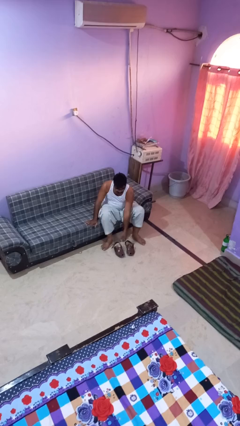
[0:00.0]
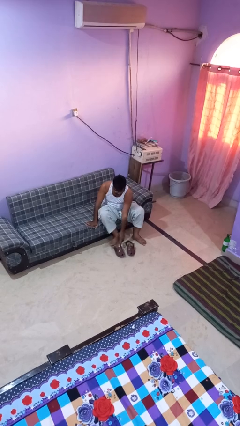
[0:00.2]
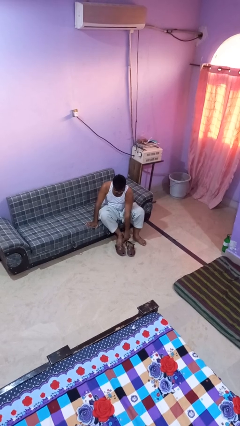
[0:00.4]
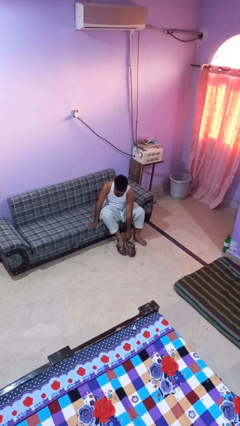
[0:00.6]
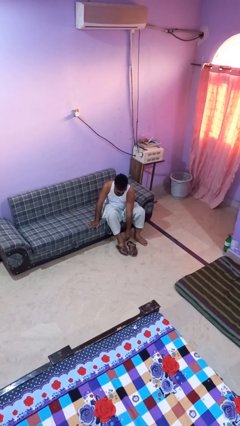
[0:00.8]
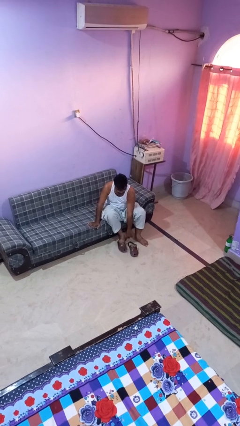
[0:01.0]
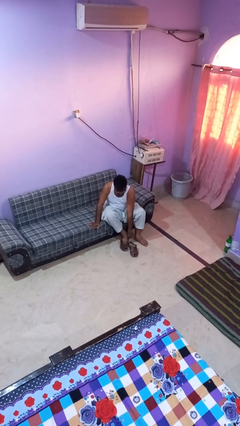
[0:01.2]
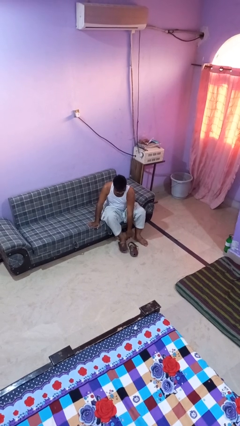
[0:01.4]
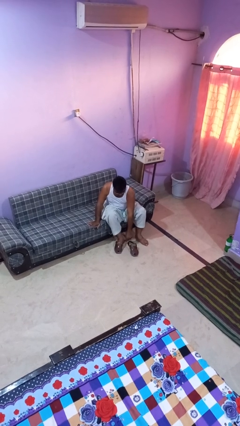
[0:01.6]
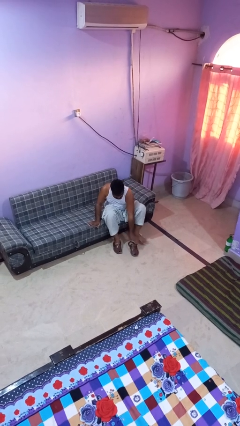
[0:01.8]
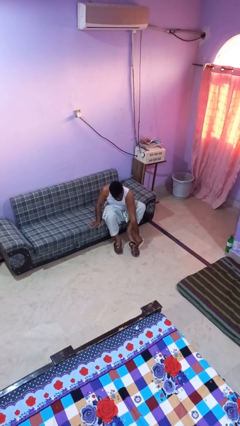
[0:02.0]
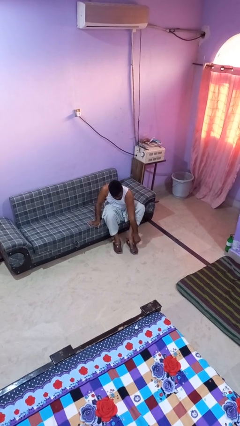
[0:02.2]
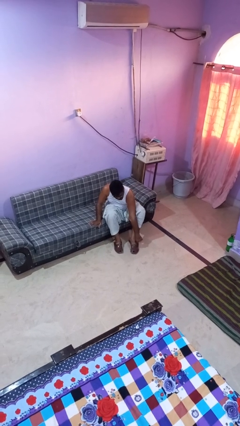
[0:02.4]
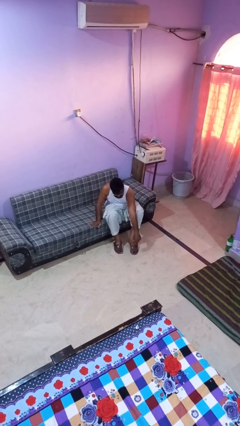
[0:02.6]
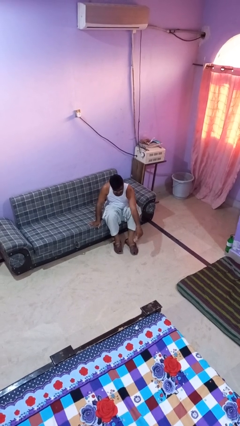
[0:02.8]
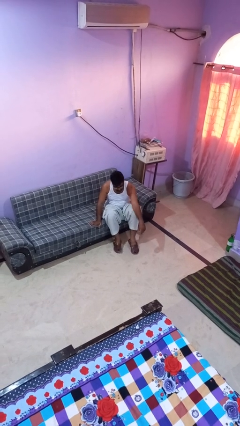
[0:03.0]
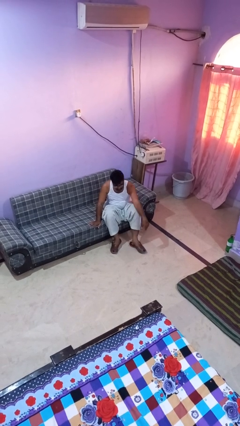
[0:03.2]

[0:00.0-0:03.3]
person puts on shoes

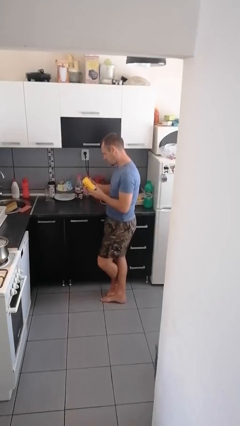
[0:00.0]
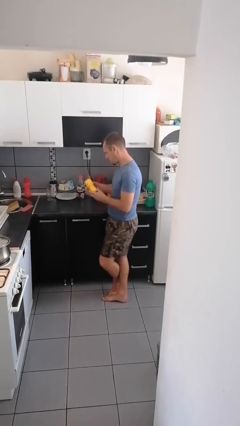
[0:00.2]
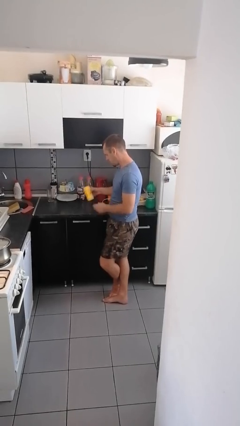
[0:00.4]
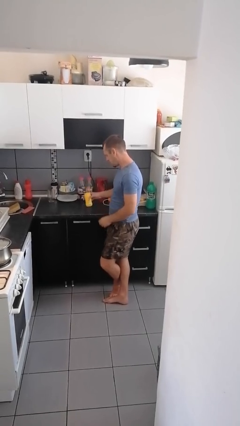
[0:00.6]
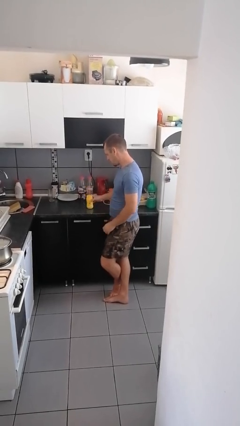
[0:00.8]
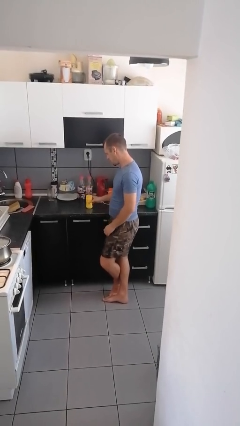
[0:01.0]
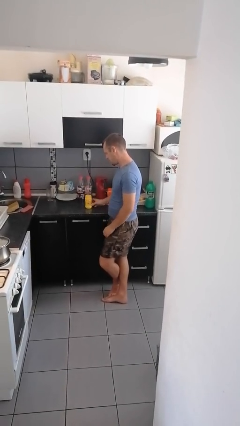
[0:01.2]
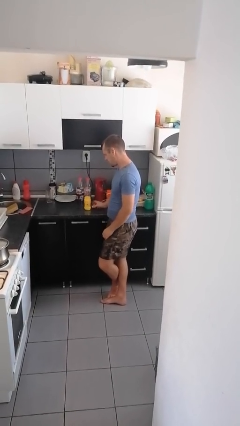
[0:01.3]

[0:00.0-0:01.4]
person puts down object on countertop

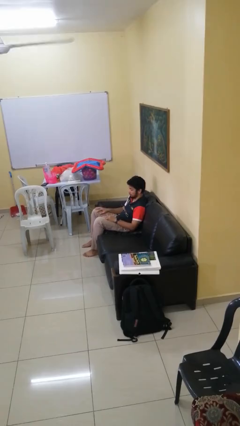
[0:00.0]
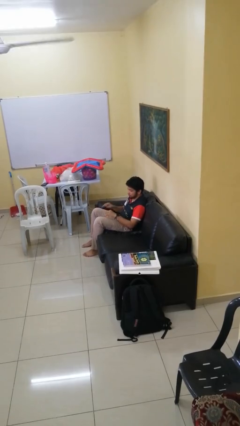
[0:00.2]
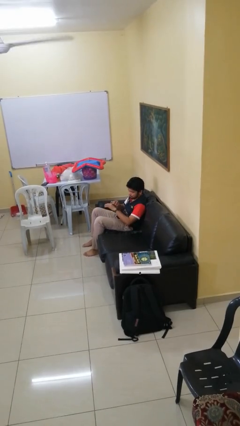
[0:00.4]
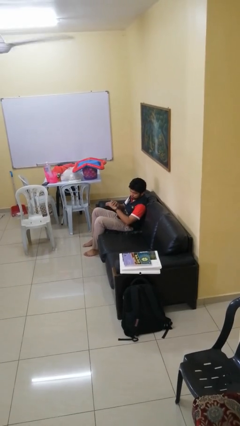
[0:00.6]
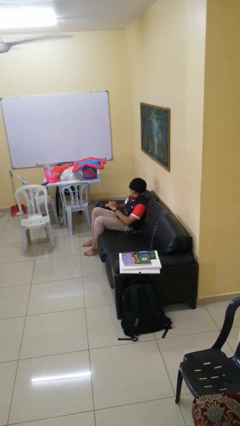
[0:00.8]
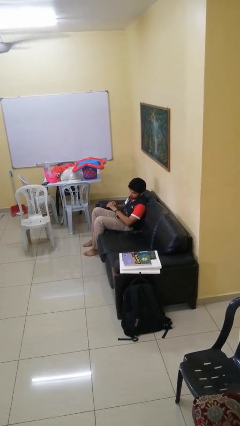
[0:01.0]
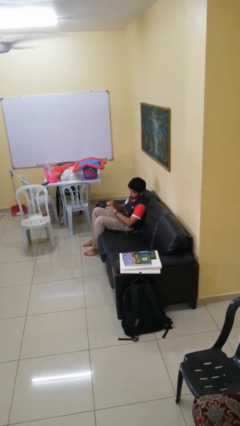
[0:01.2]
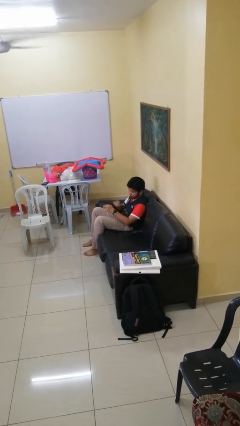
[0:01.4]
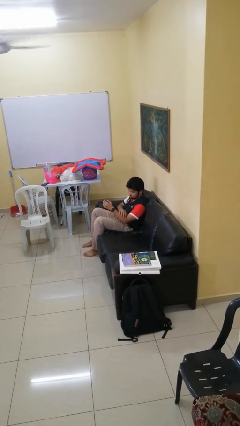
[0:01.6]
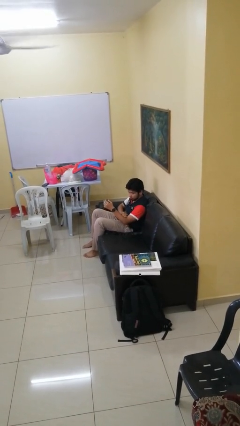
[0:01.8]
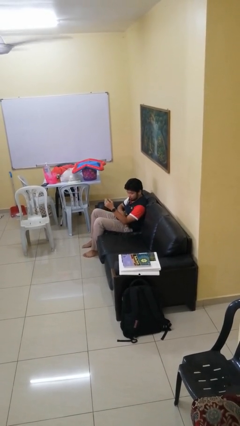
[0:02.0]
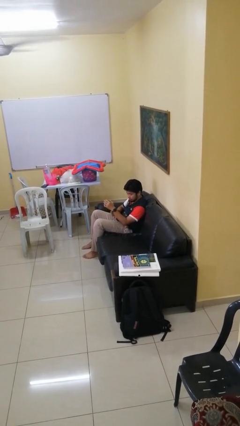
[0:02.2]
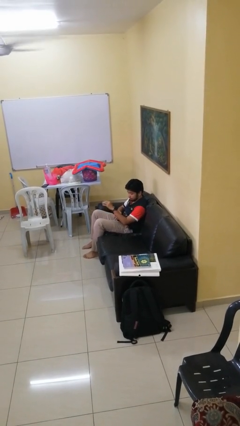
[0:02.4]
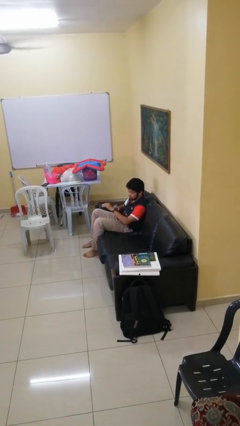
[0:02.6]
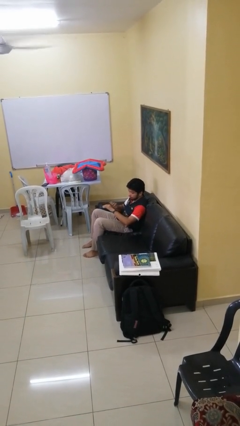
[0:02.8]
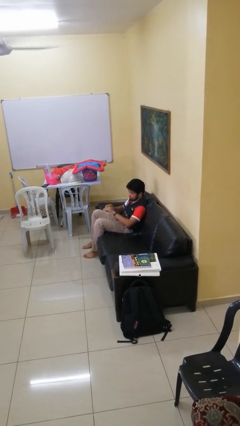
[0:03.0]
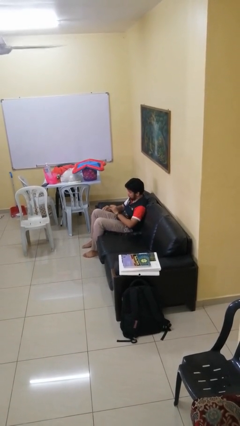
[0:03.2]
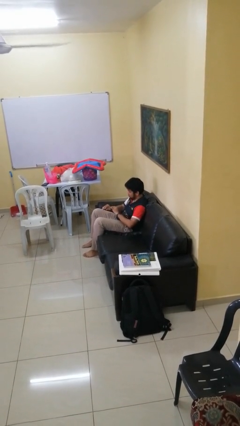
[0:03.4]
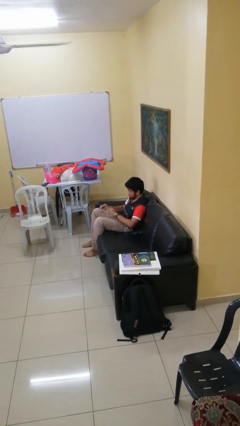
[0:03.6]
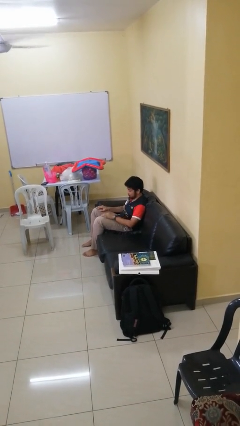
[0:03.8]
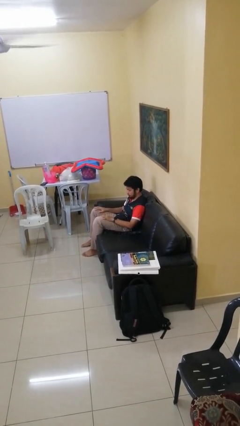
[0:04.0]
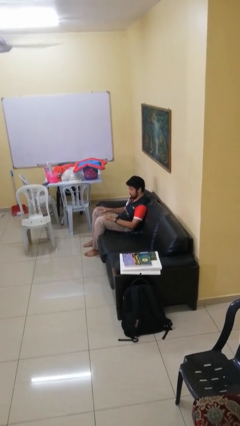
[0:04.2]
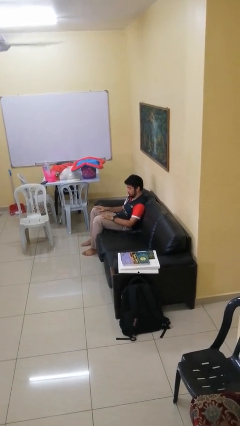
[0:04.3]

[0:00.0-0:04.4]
person looks at hands in lap

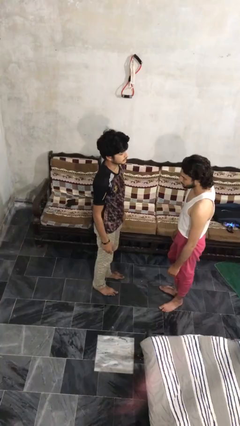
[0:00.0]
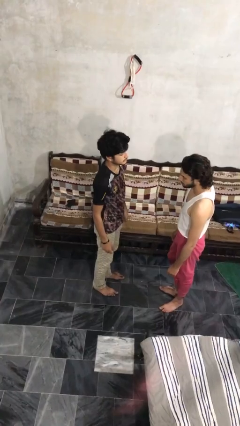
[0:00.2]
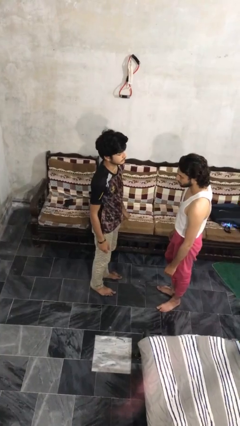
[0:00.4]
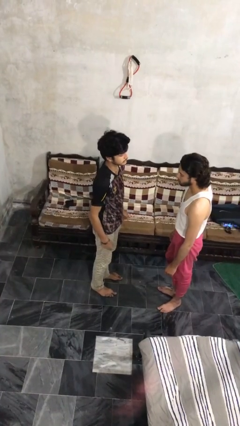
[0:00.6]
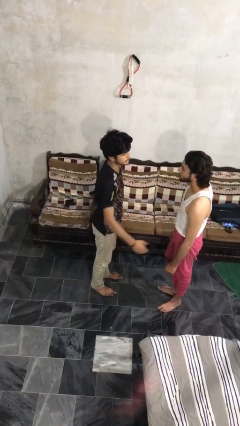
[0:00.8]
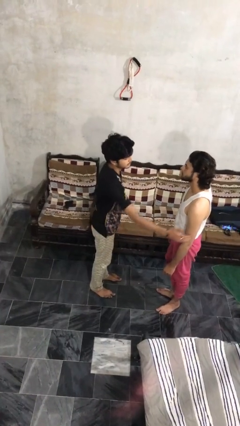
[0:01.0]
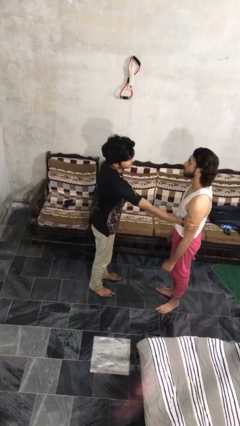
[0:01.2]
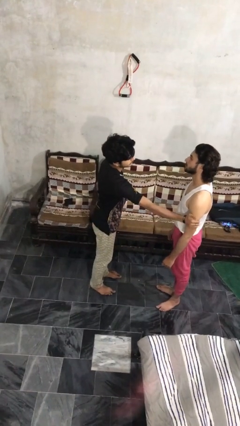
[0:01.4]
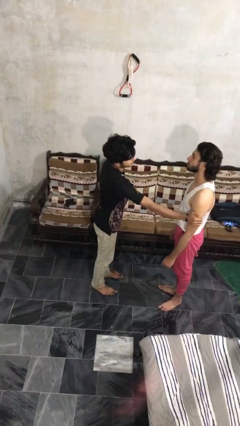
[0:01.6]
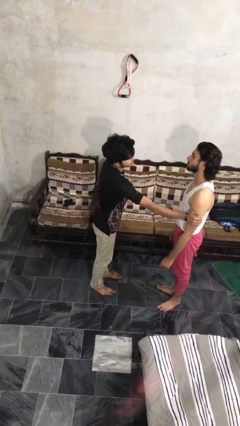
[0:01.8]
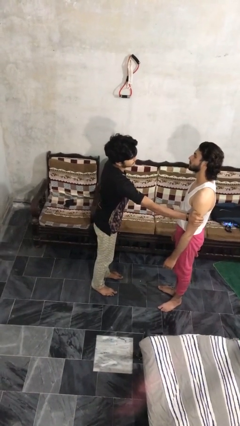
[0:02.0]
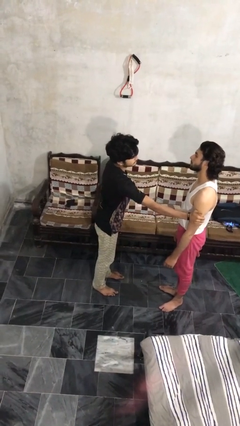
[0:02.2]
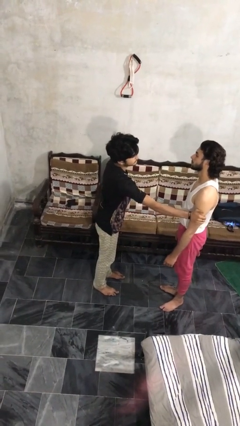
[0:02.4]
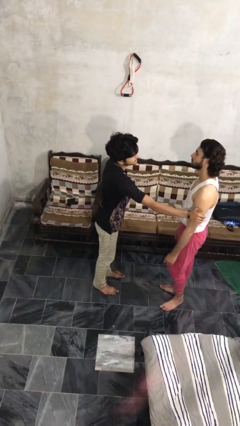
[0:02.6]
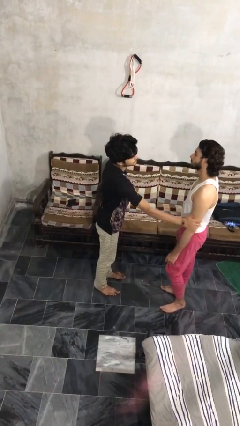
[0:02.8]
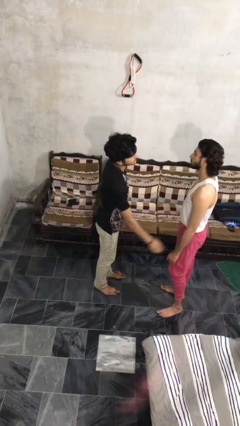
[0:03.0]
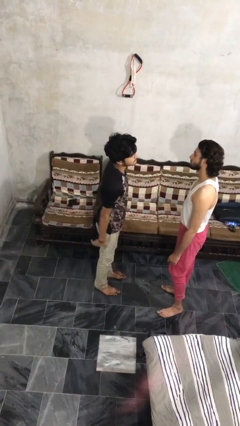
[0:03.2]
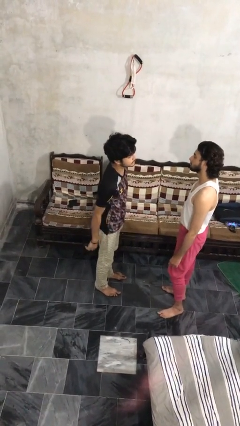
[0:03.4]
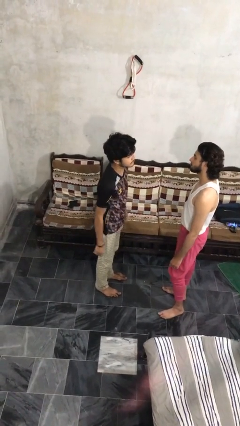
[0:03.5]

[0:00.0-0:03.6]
person grabs person by bicep

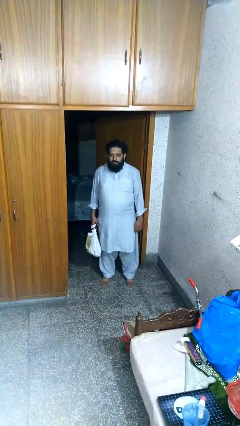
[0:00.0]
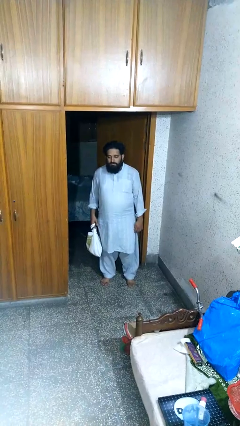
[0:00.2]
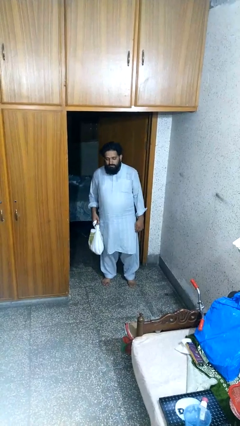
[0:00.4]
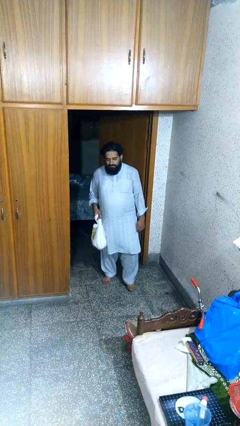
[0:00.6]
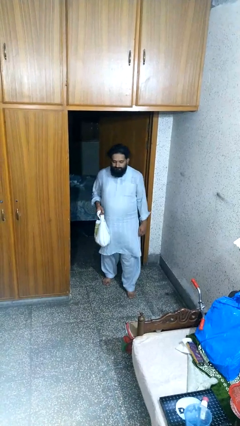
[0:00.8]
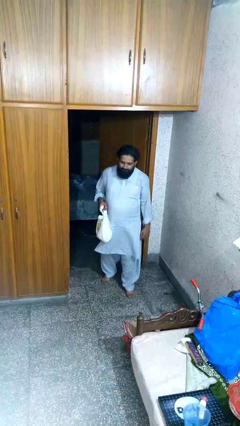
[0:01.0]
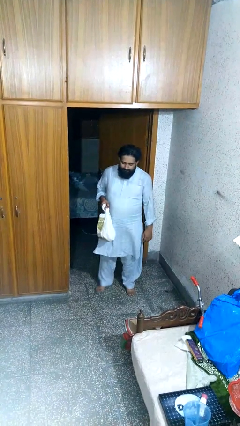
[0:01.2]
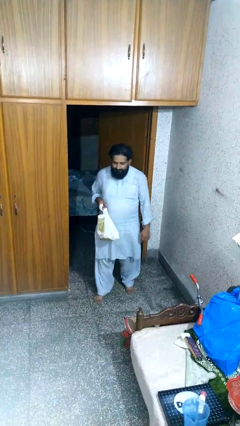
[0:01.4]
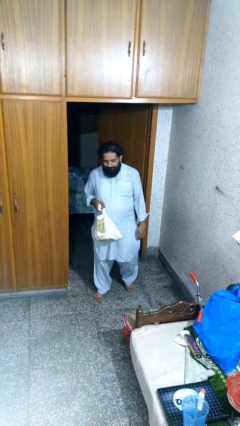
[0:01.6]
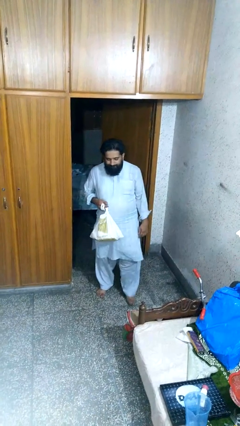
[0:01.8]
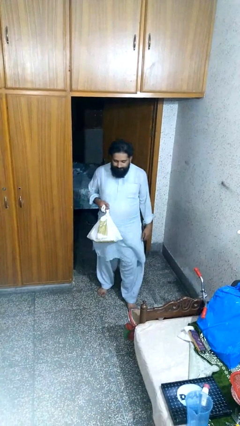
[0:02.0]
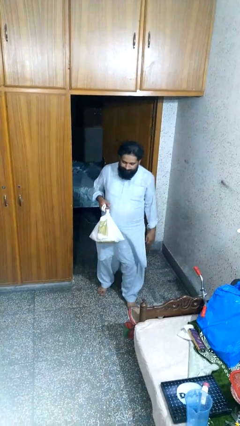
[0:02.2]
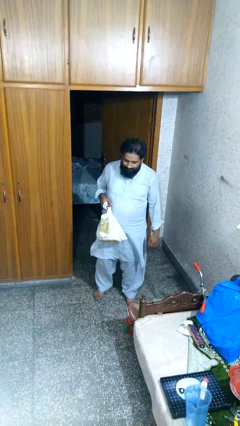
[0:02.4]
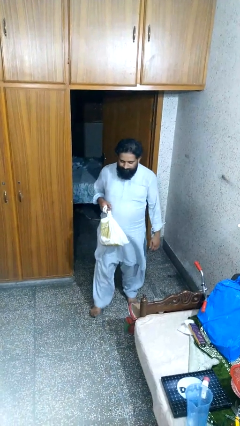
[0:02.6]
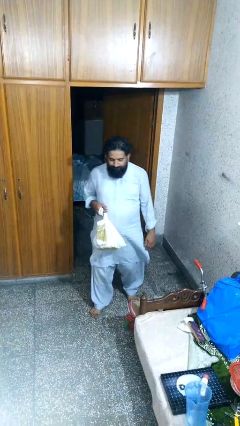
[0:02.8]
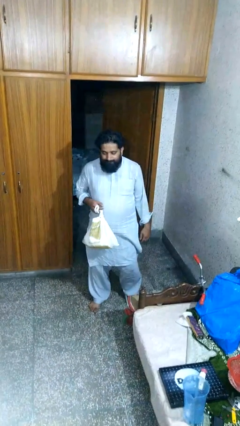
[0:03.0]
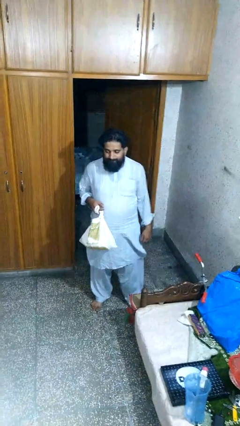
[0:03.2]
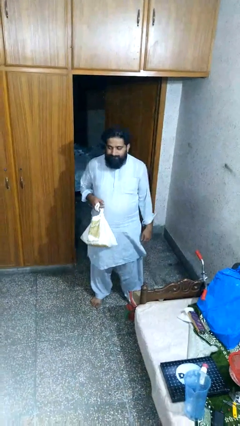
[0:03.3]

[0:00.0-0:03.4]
person carries groceries

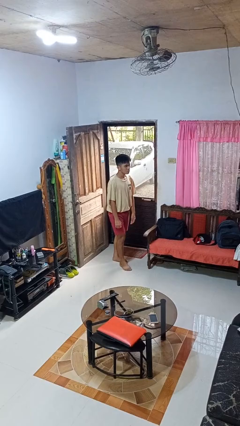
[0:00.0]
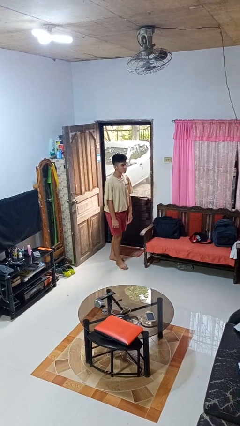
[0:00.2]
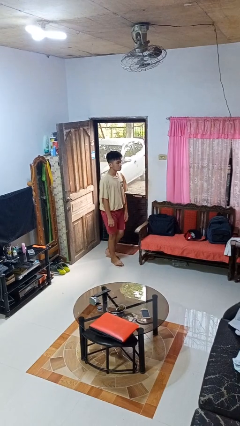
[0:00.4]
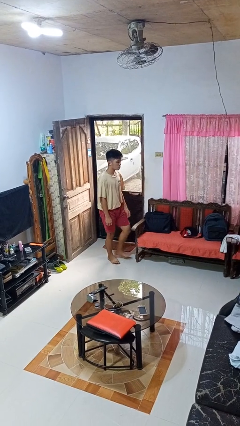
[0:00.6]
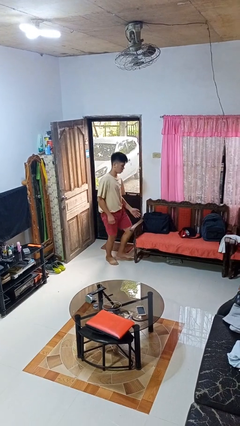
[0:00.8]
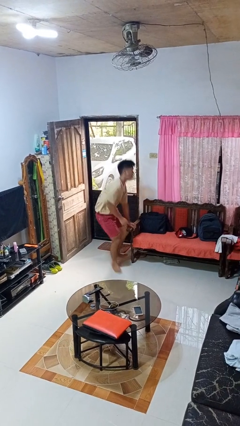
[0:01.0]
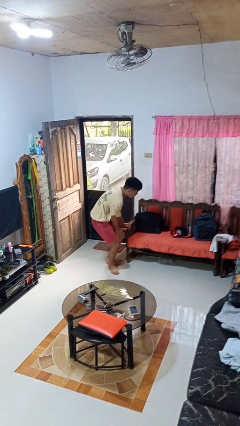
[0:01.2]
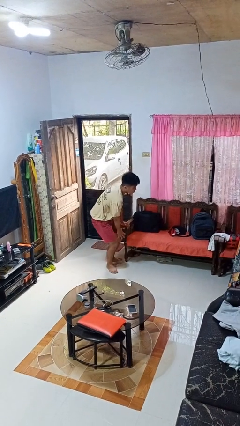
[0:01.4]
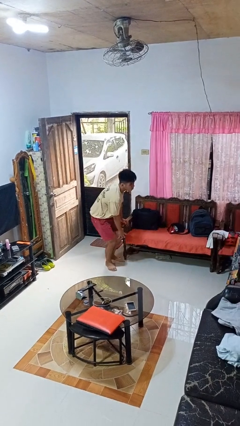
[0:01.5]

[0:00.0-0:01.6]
person trips on object on floor
